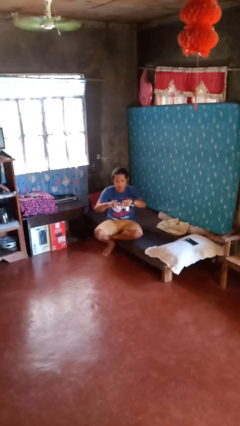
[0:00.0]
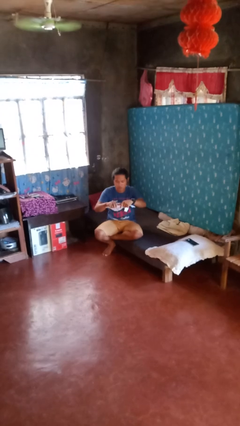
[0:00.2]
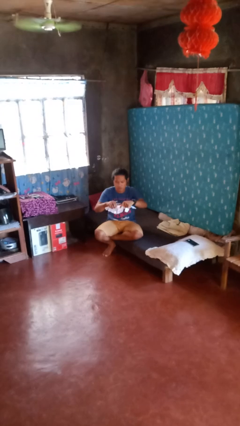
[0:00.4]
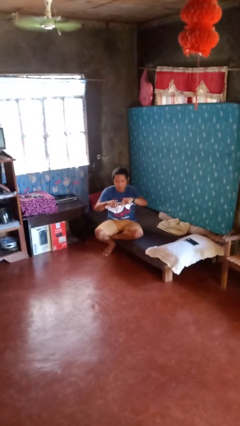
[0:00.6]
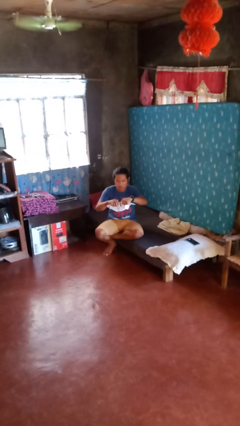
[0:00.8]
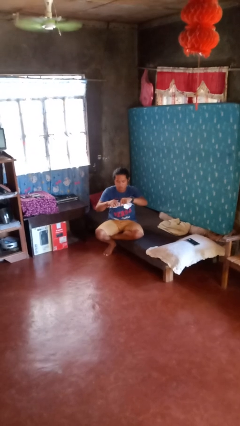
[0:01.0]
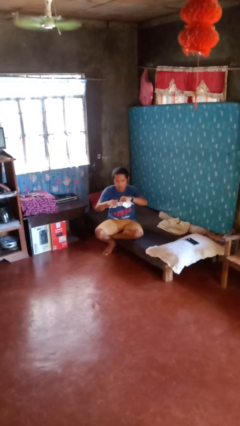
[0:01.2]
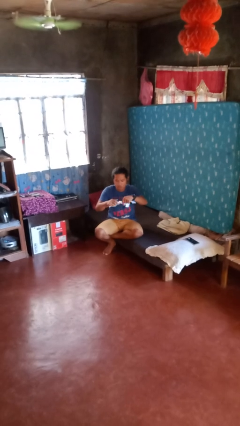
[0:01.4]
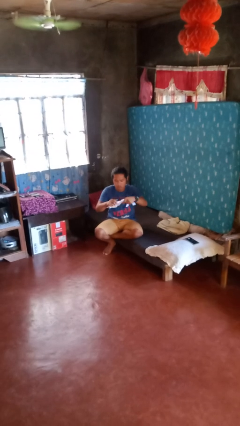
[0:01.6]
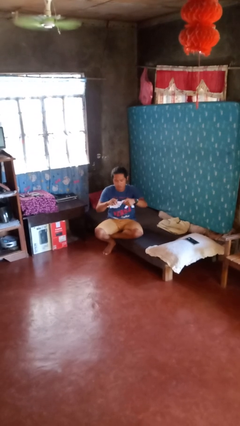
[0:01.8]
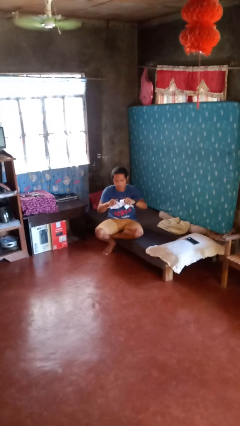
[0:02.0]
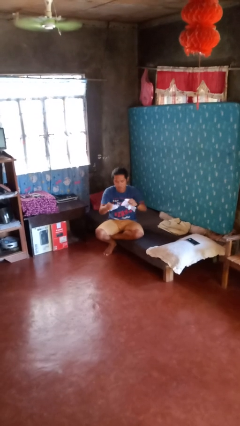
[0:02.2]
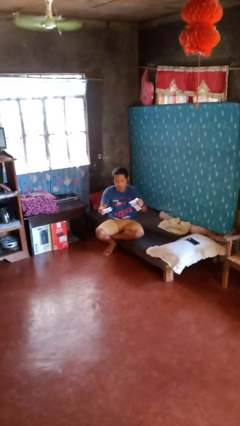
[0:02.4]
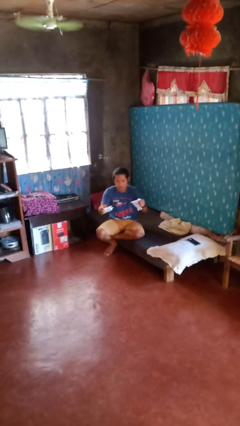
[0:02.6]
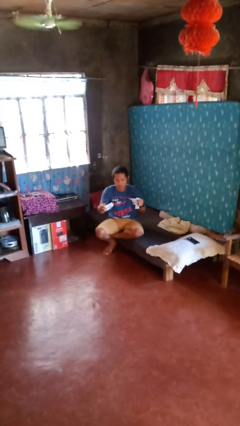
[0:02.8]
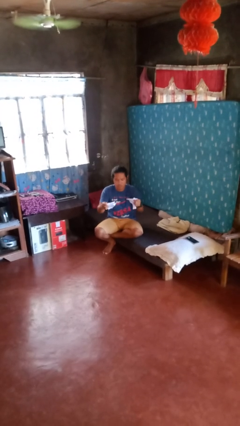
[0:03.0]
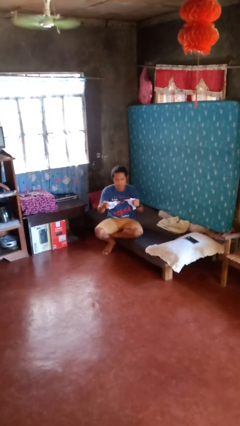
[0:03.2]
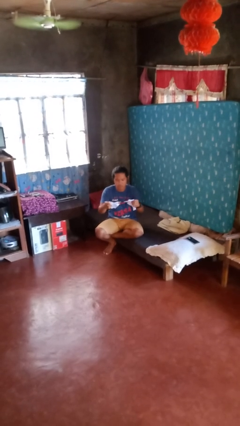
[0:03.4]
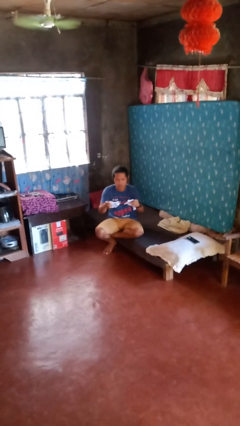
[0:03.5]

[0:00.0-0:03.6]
person tears paper

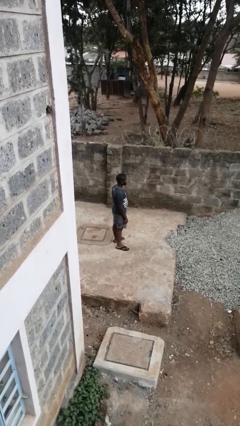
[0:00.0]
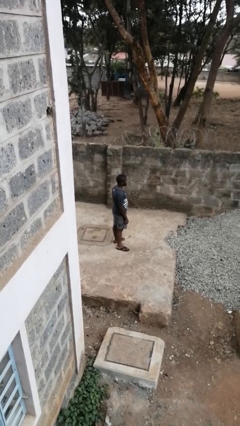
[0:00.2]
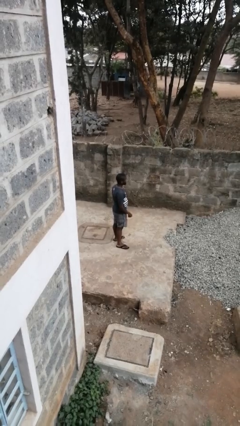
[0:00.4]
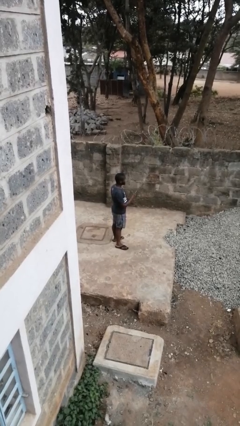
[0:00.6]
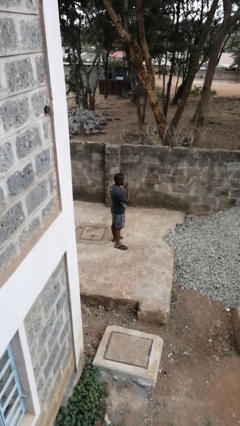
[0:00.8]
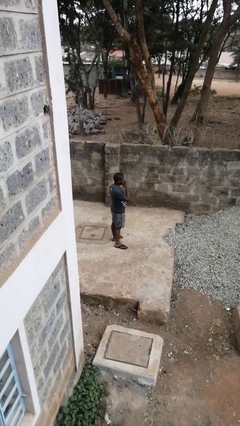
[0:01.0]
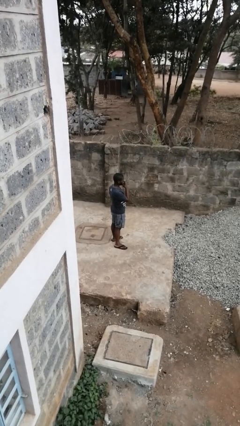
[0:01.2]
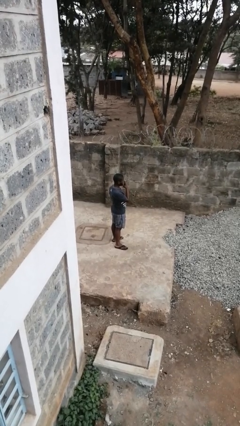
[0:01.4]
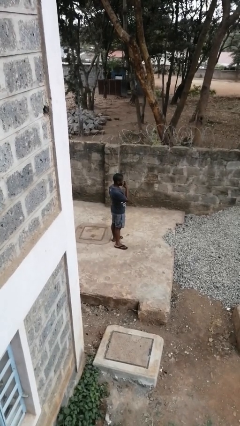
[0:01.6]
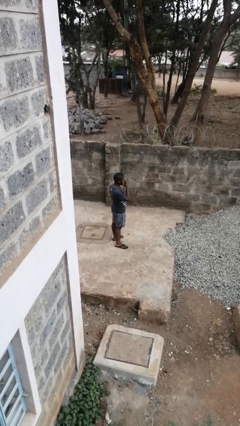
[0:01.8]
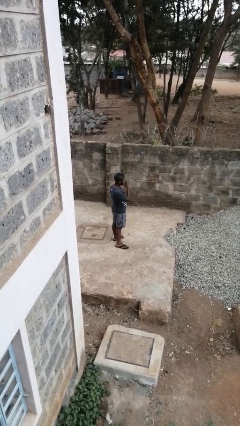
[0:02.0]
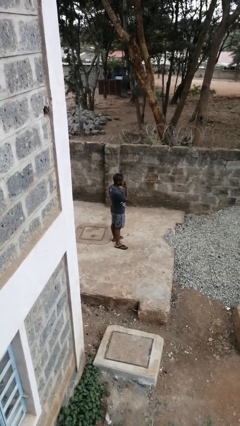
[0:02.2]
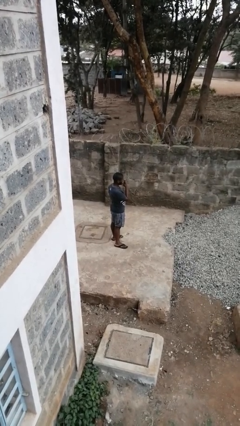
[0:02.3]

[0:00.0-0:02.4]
person gestures watch closely

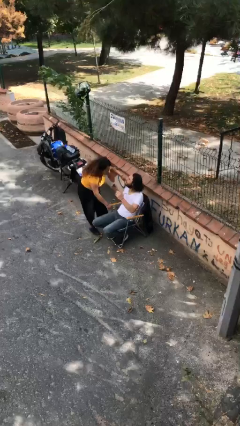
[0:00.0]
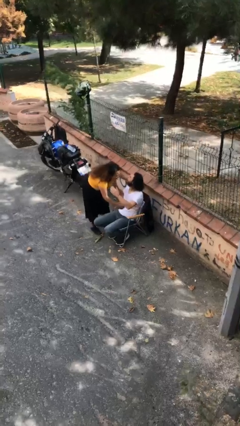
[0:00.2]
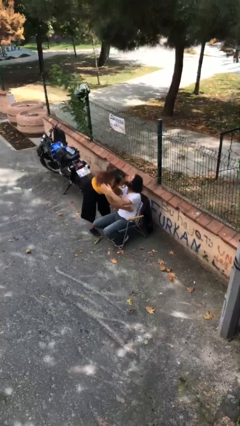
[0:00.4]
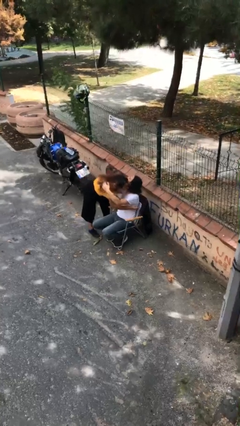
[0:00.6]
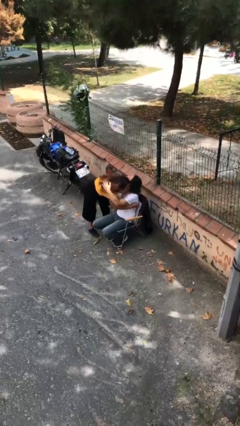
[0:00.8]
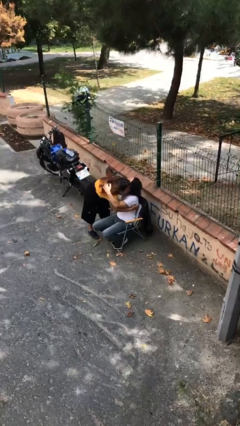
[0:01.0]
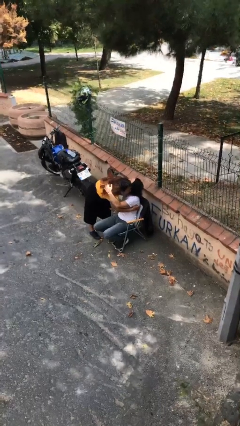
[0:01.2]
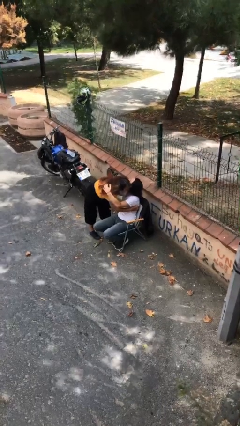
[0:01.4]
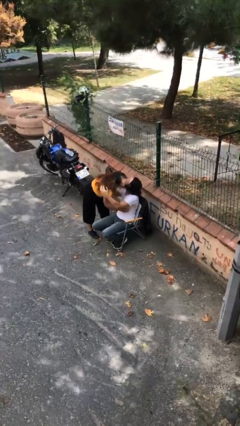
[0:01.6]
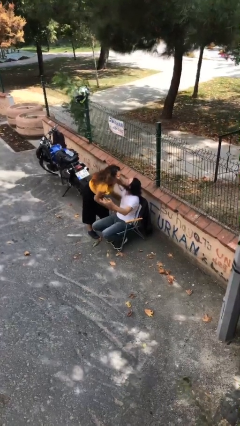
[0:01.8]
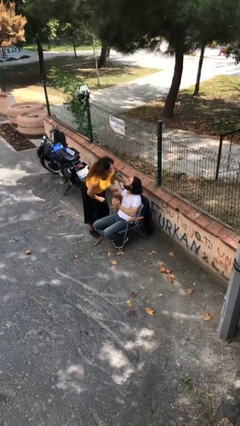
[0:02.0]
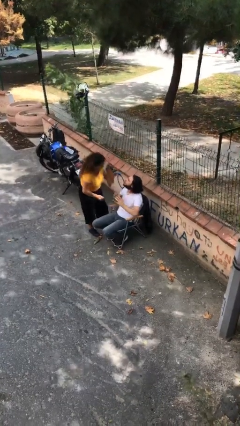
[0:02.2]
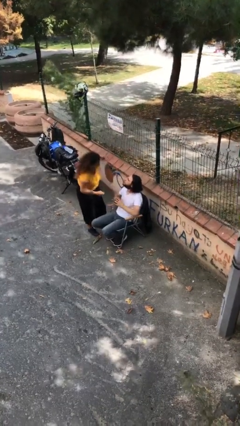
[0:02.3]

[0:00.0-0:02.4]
person embraces person

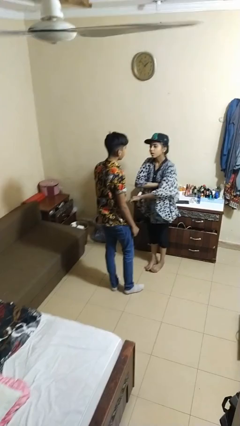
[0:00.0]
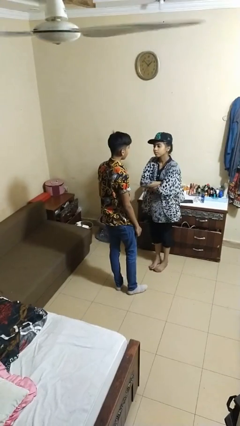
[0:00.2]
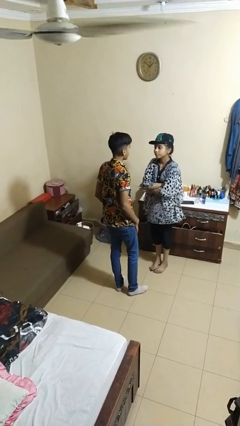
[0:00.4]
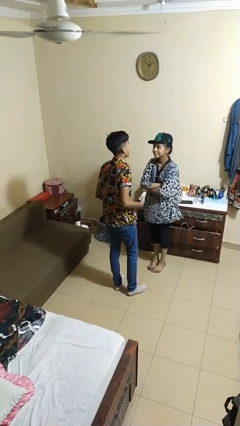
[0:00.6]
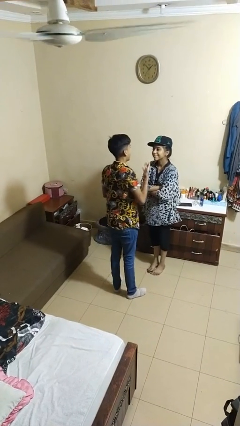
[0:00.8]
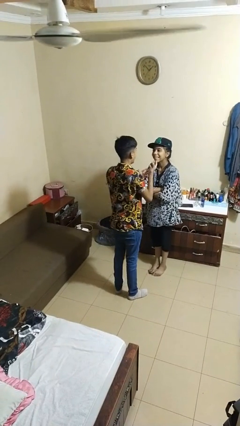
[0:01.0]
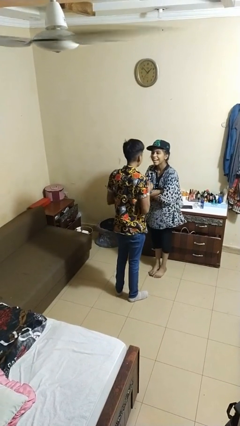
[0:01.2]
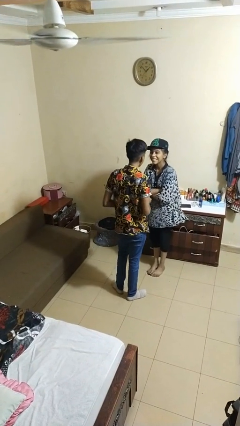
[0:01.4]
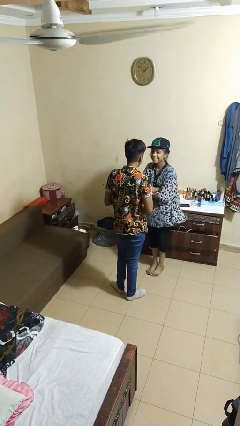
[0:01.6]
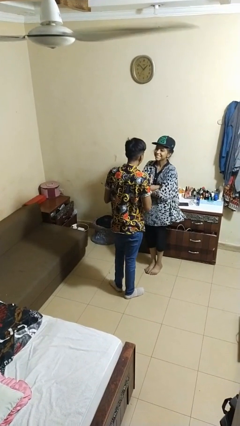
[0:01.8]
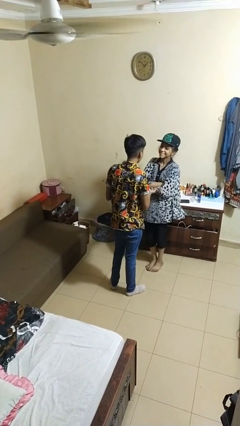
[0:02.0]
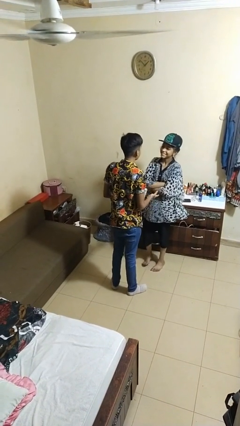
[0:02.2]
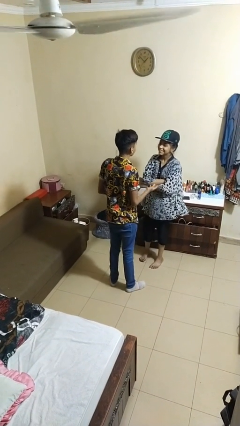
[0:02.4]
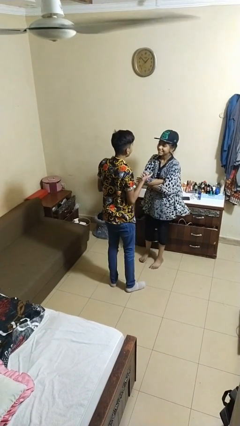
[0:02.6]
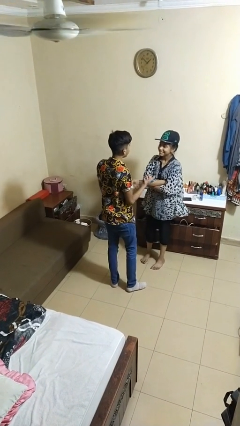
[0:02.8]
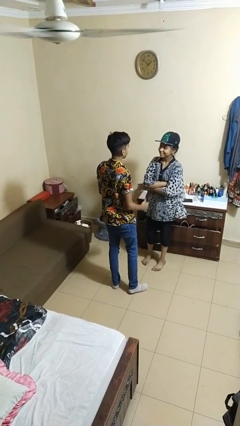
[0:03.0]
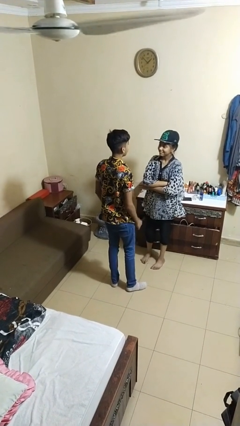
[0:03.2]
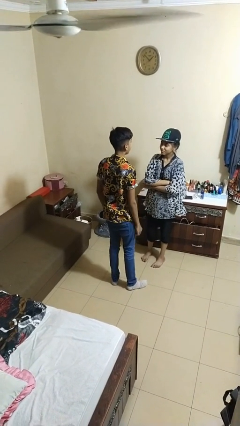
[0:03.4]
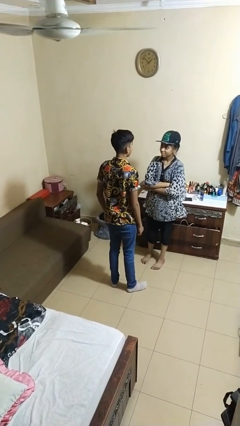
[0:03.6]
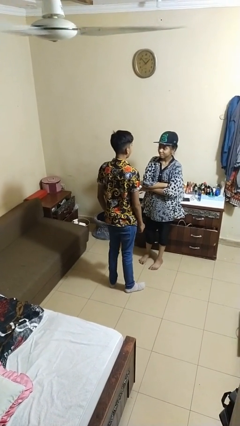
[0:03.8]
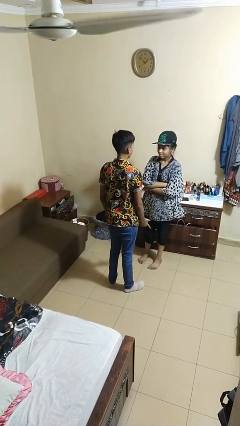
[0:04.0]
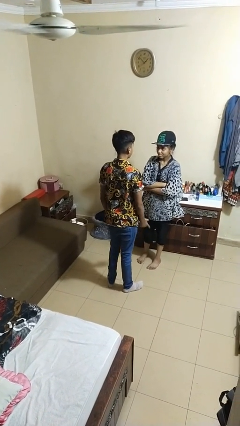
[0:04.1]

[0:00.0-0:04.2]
person laughs with person

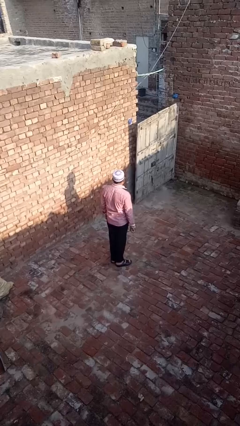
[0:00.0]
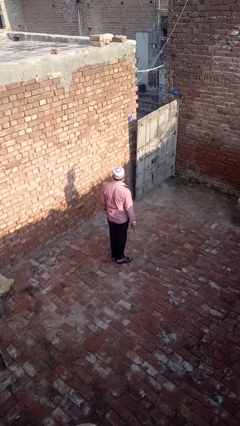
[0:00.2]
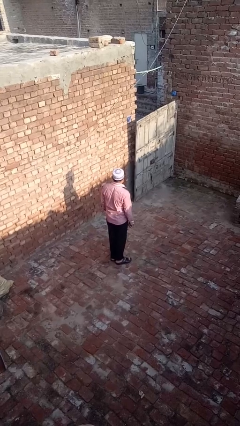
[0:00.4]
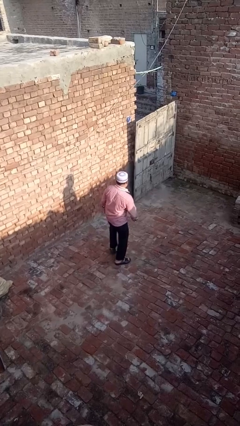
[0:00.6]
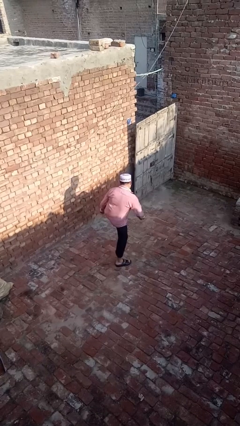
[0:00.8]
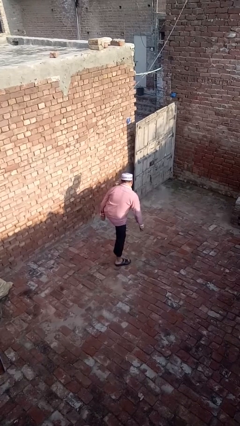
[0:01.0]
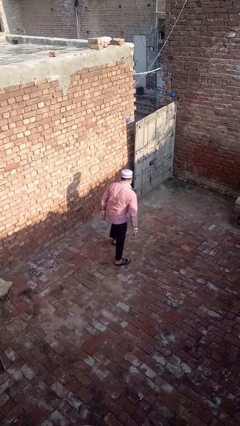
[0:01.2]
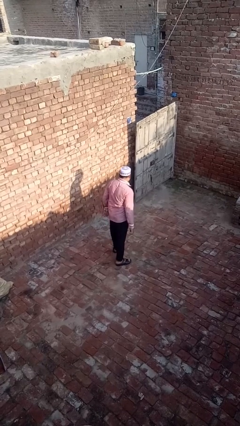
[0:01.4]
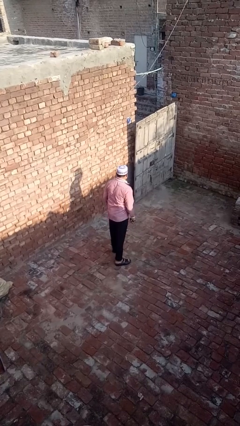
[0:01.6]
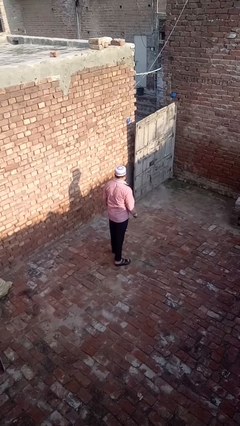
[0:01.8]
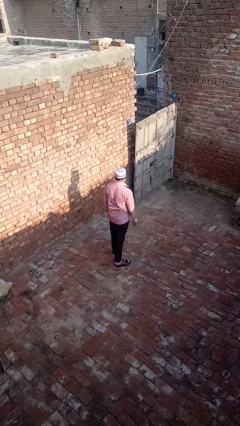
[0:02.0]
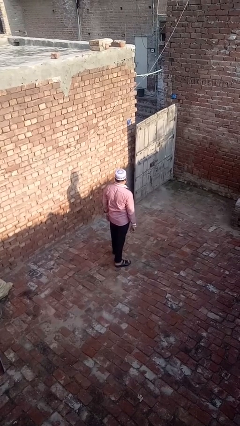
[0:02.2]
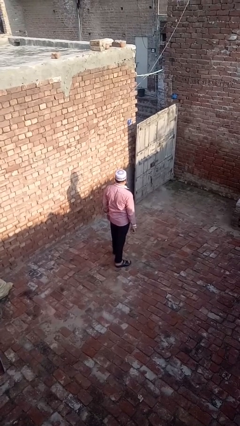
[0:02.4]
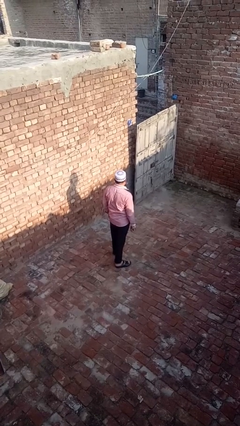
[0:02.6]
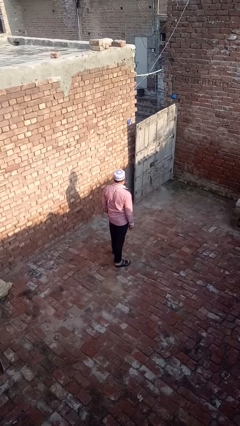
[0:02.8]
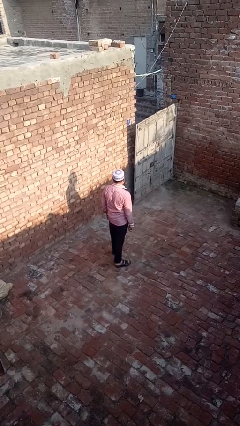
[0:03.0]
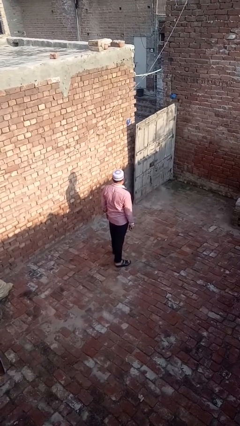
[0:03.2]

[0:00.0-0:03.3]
person karate kicks

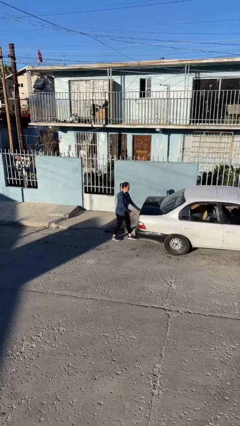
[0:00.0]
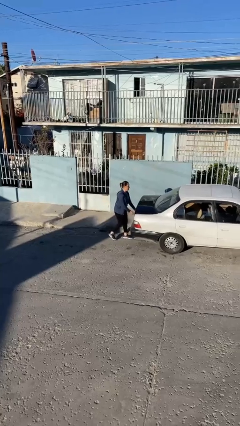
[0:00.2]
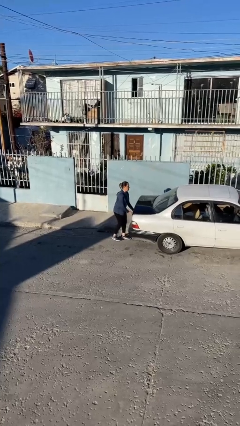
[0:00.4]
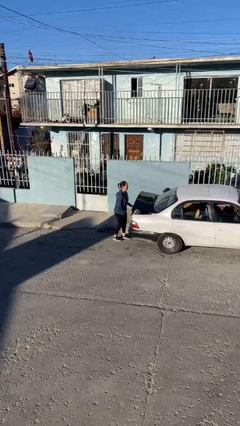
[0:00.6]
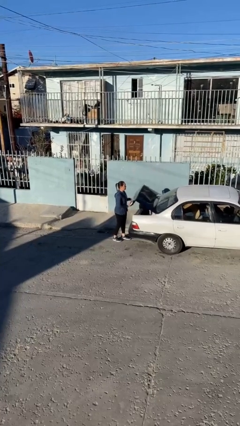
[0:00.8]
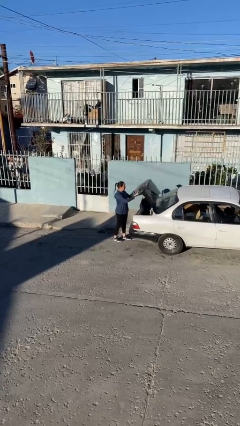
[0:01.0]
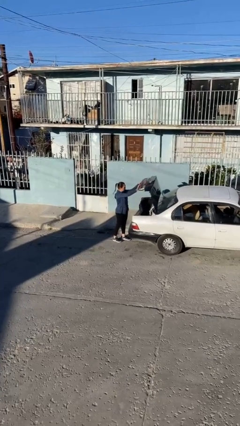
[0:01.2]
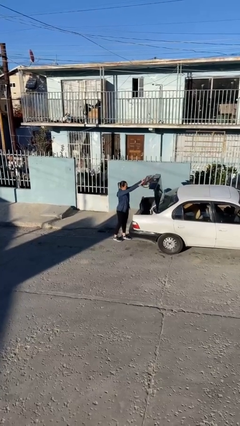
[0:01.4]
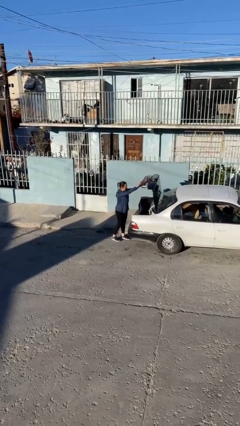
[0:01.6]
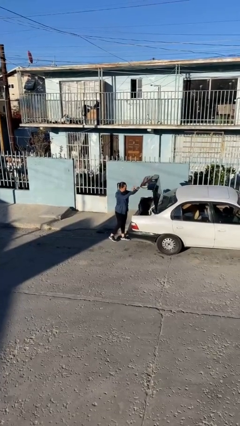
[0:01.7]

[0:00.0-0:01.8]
person opens car trunk
